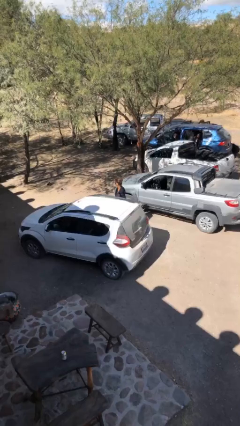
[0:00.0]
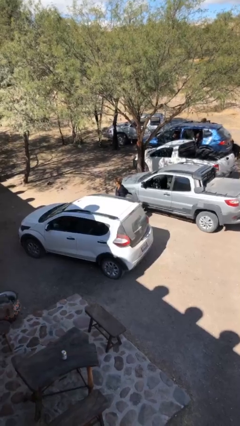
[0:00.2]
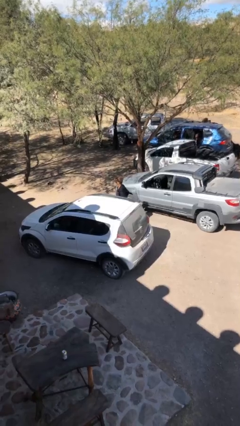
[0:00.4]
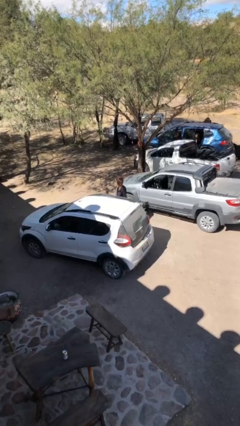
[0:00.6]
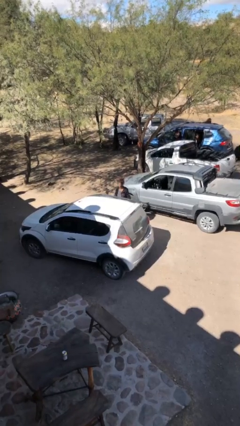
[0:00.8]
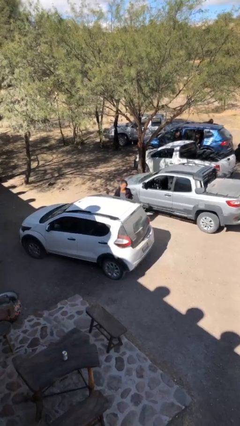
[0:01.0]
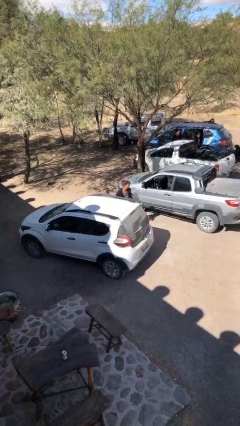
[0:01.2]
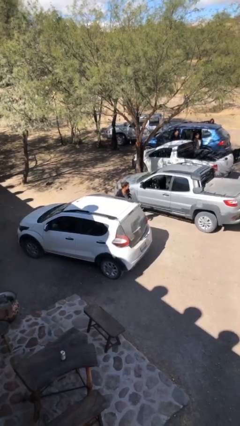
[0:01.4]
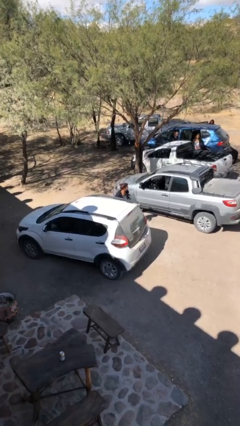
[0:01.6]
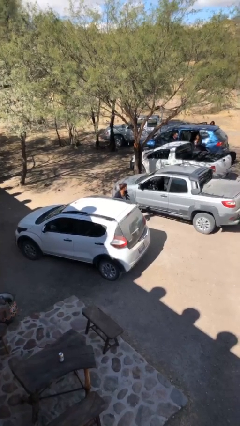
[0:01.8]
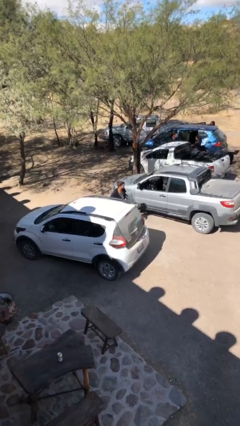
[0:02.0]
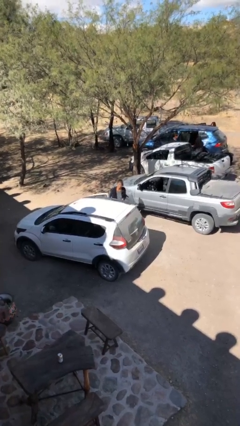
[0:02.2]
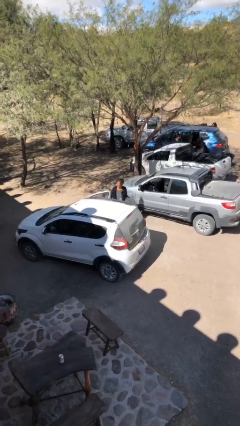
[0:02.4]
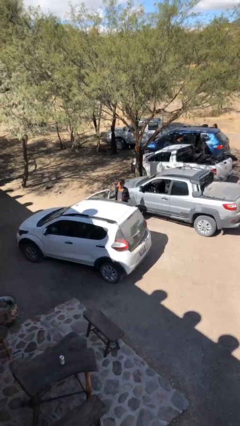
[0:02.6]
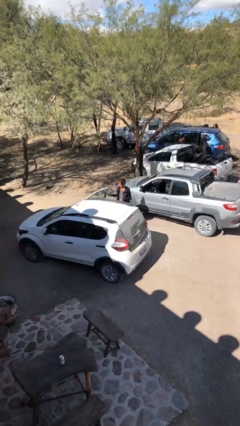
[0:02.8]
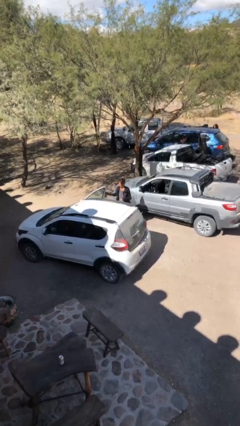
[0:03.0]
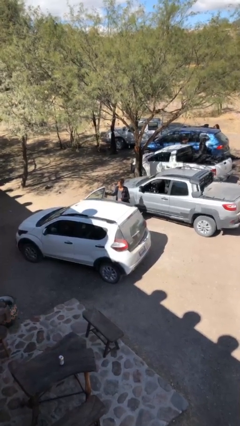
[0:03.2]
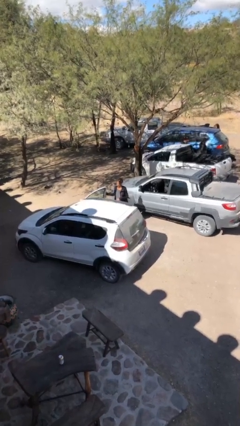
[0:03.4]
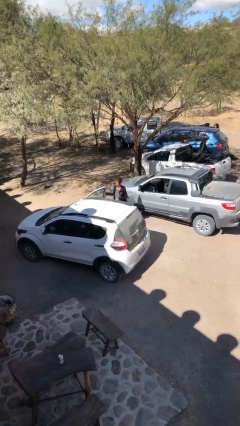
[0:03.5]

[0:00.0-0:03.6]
person opens car door

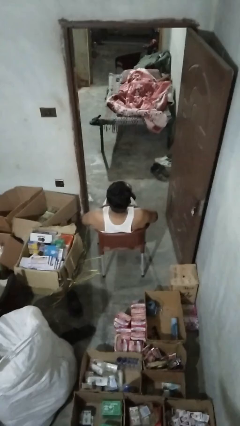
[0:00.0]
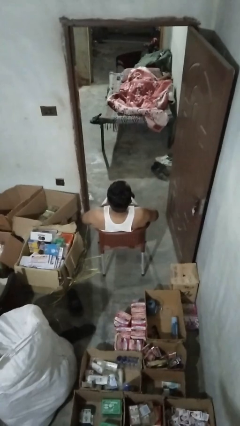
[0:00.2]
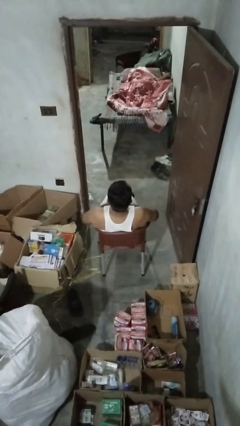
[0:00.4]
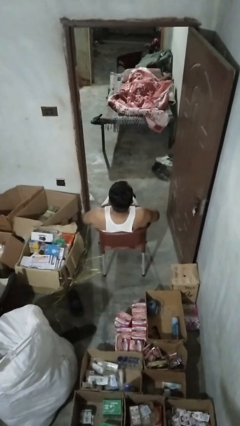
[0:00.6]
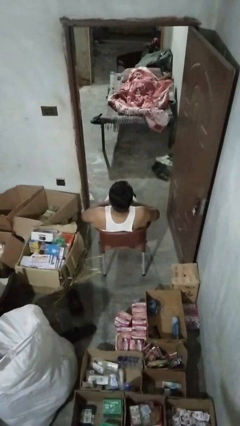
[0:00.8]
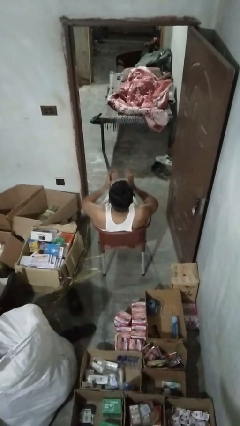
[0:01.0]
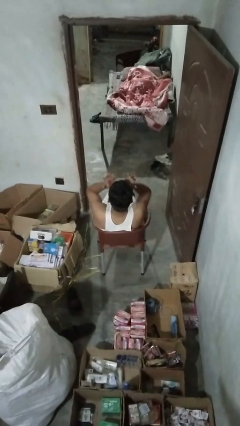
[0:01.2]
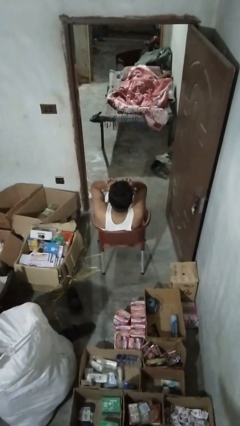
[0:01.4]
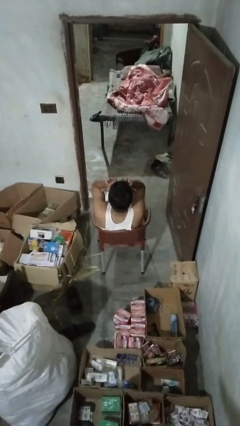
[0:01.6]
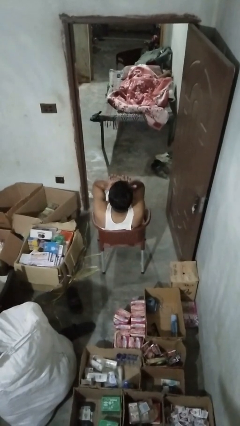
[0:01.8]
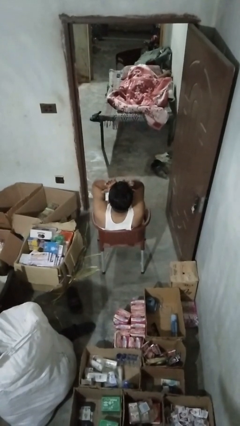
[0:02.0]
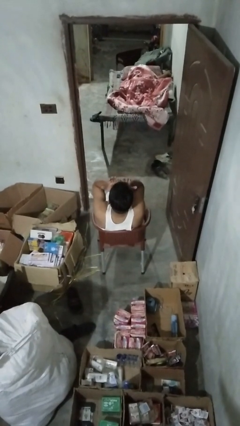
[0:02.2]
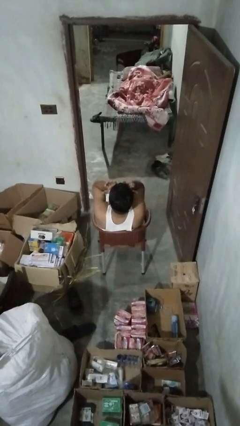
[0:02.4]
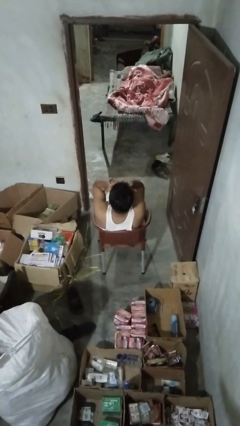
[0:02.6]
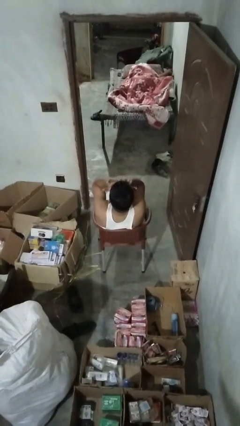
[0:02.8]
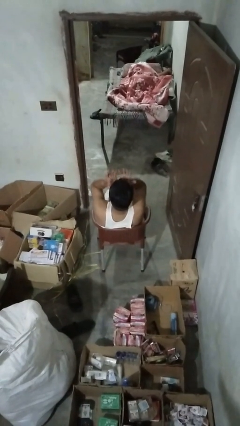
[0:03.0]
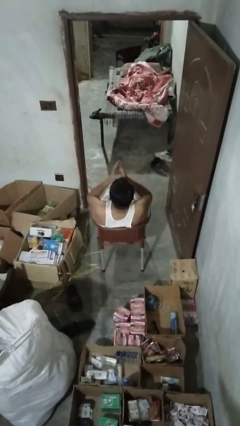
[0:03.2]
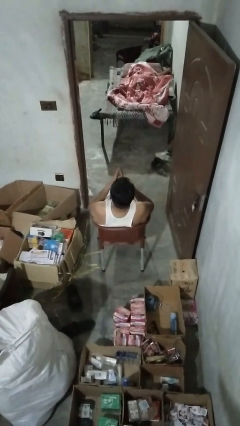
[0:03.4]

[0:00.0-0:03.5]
person rubs eyes

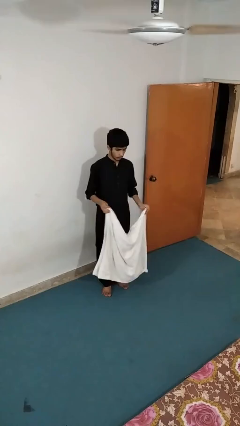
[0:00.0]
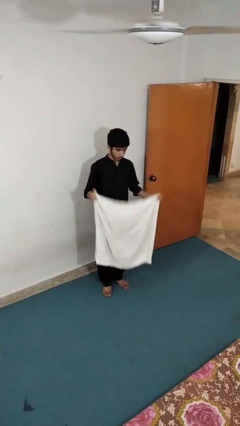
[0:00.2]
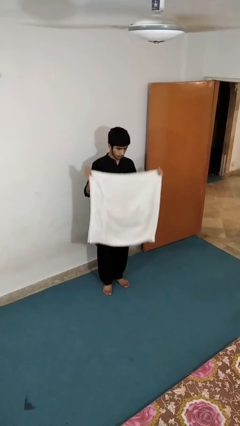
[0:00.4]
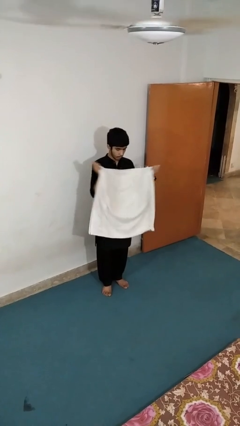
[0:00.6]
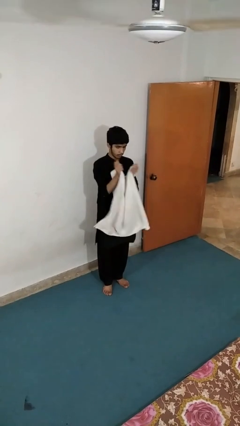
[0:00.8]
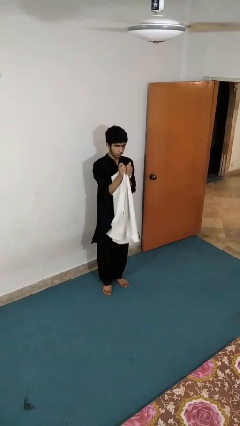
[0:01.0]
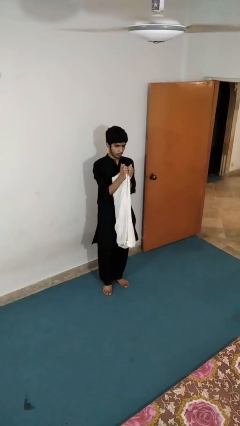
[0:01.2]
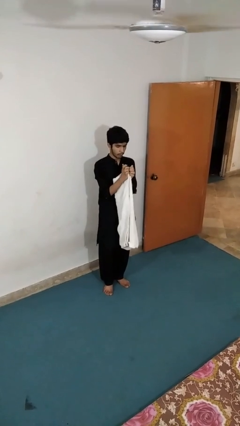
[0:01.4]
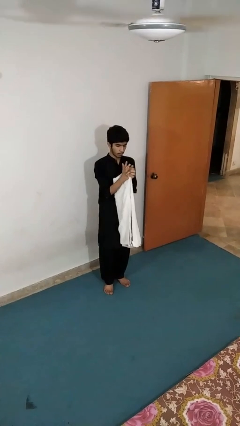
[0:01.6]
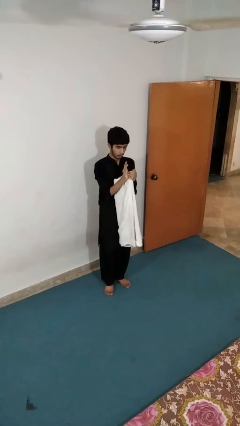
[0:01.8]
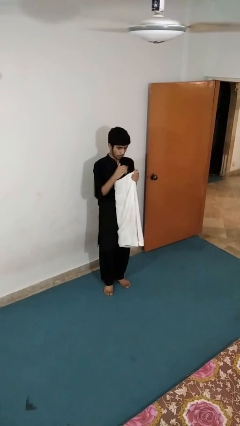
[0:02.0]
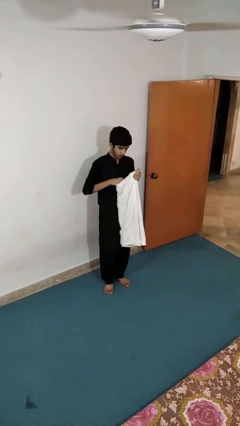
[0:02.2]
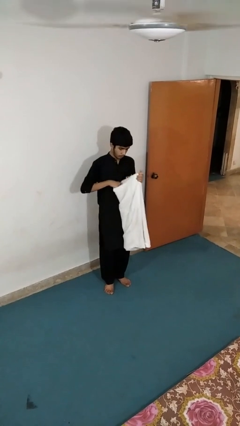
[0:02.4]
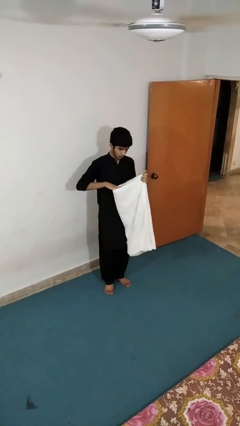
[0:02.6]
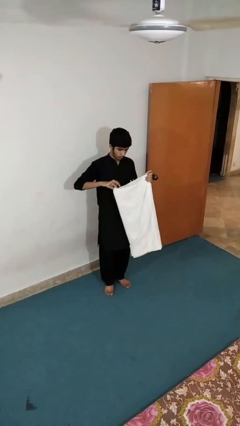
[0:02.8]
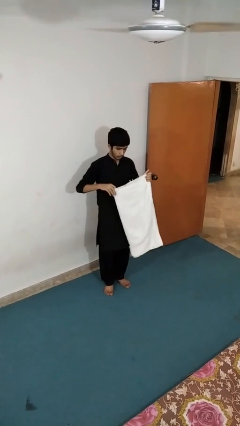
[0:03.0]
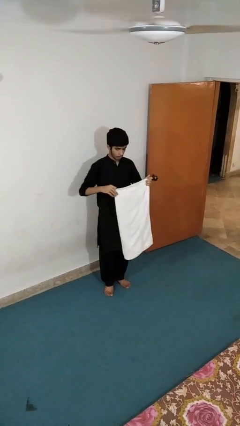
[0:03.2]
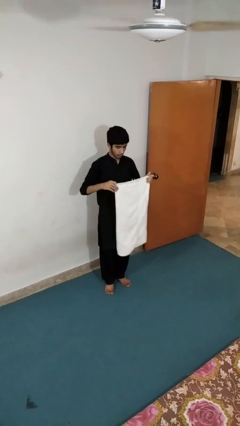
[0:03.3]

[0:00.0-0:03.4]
person folds towel

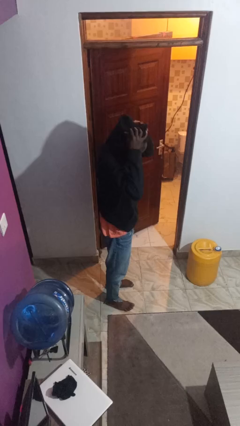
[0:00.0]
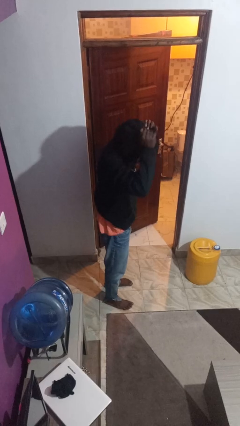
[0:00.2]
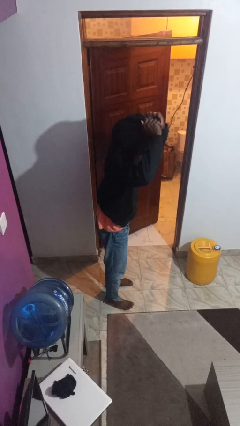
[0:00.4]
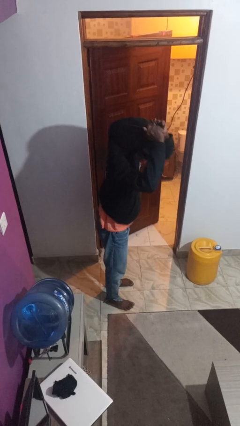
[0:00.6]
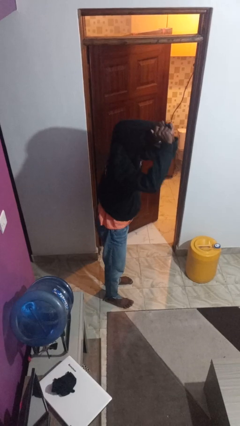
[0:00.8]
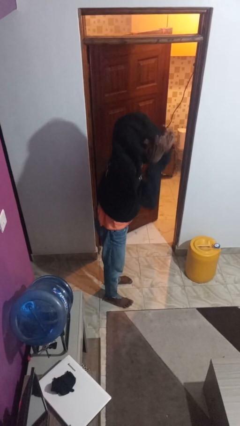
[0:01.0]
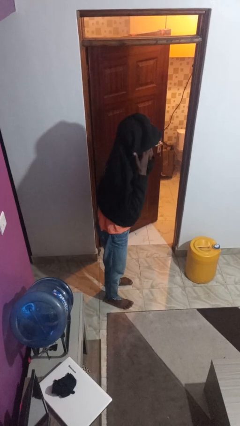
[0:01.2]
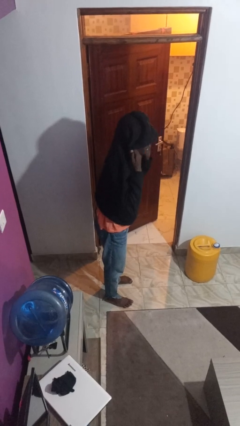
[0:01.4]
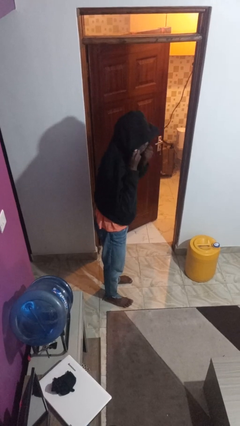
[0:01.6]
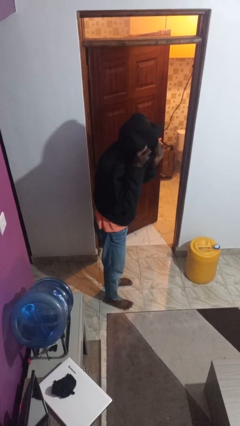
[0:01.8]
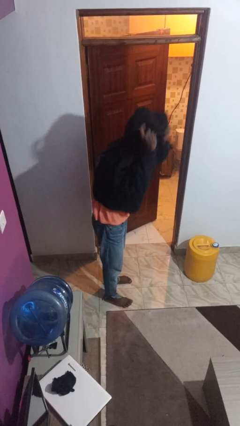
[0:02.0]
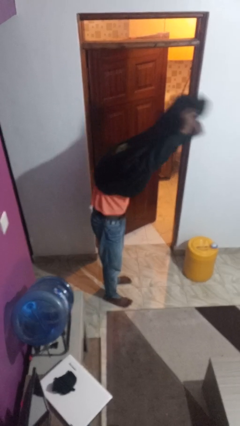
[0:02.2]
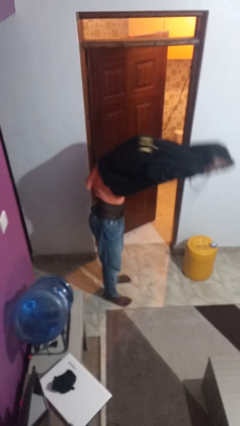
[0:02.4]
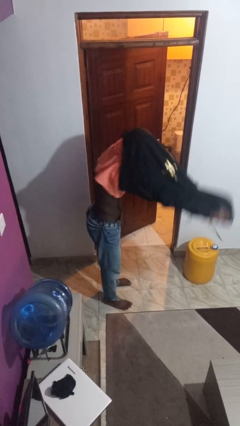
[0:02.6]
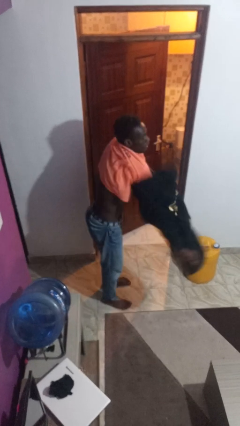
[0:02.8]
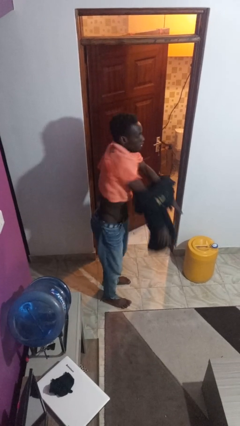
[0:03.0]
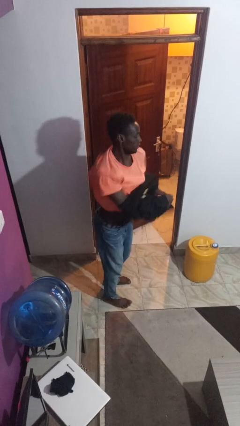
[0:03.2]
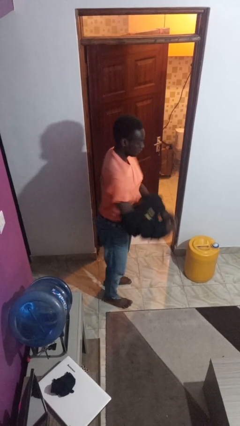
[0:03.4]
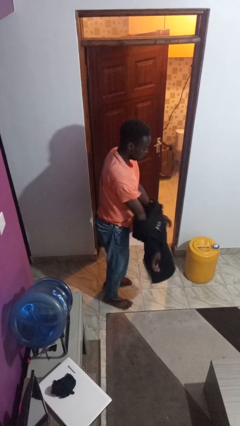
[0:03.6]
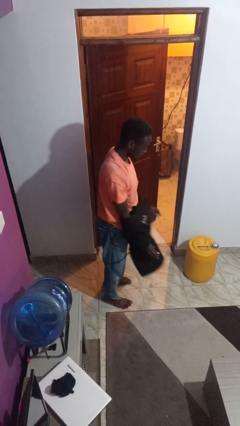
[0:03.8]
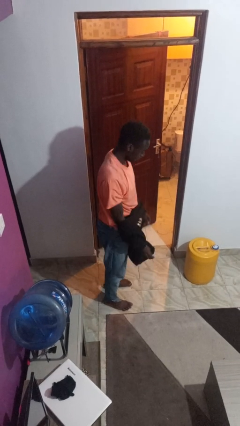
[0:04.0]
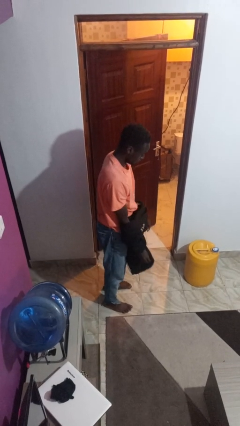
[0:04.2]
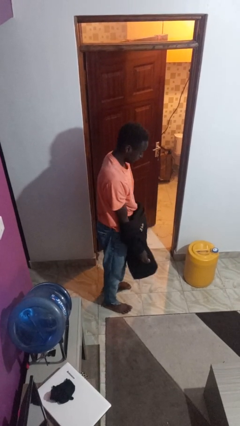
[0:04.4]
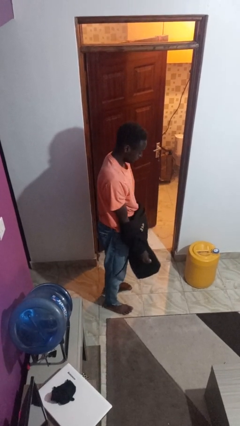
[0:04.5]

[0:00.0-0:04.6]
person takes off hoodie

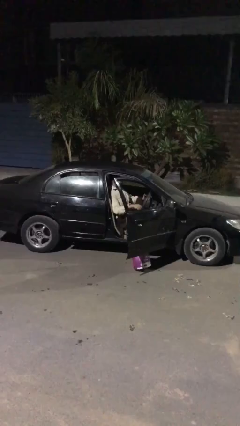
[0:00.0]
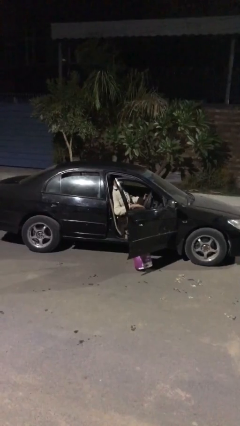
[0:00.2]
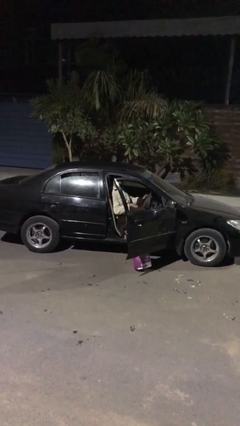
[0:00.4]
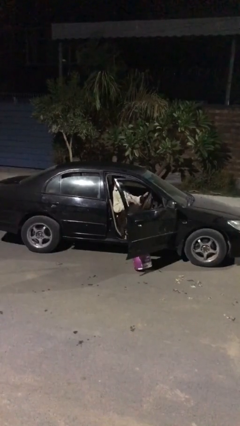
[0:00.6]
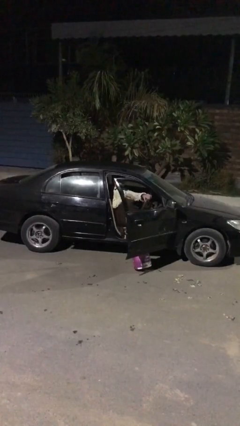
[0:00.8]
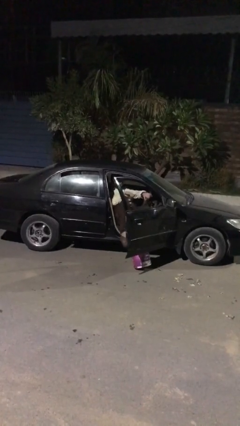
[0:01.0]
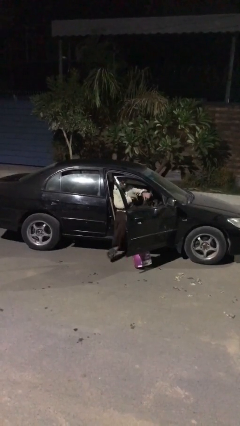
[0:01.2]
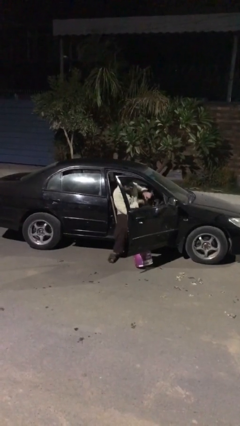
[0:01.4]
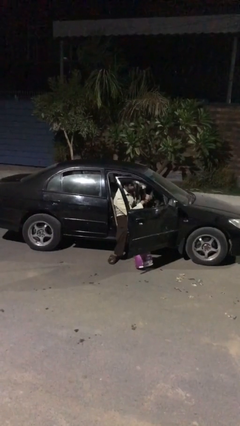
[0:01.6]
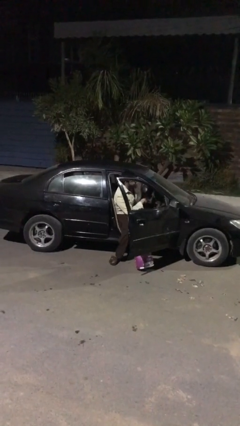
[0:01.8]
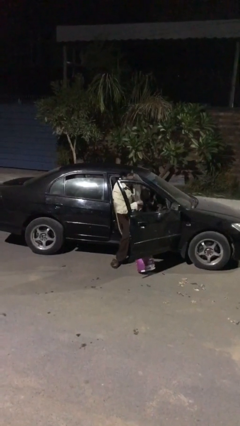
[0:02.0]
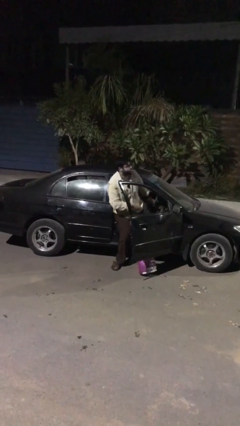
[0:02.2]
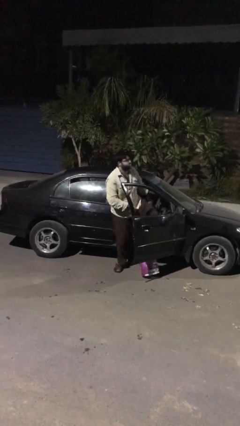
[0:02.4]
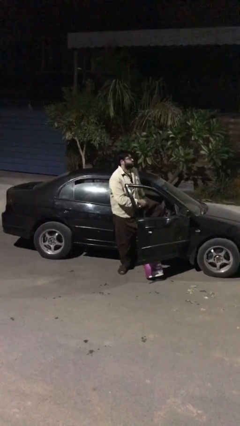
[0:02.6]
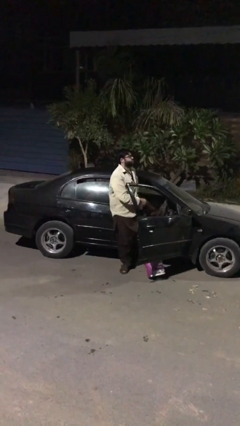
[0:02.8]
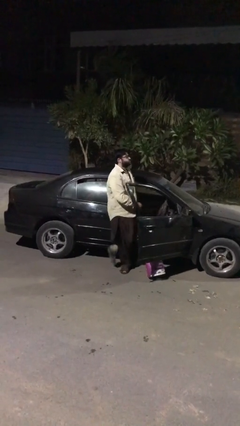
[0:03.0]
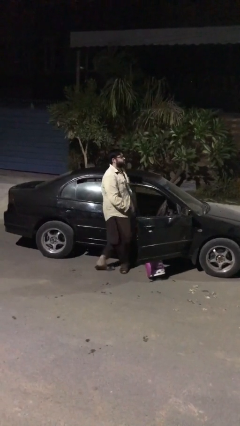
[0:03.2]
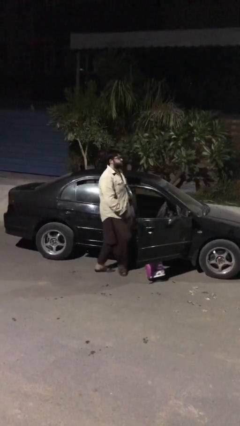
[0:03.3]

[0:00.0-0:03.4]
person exits car
